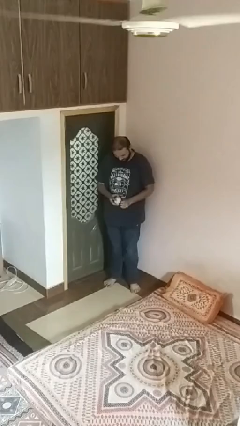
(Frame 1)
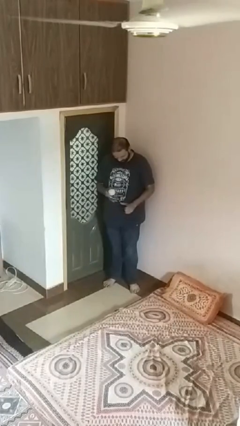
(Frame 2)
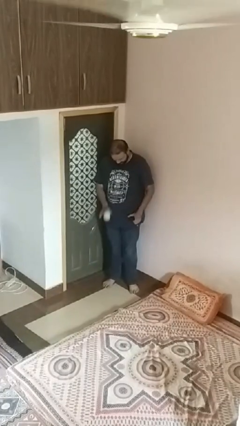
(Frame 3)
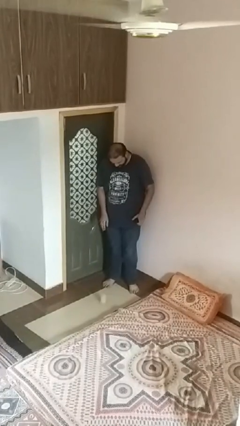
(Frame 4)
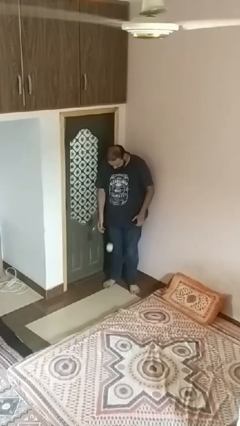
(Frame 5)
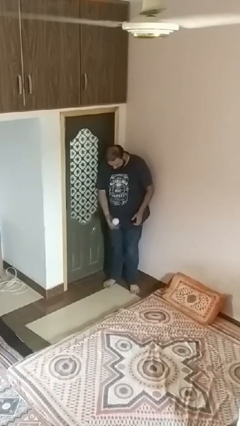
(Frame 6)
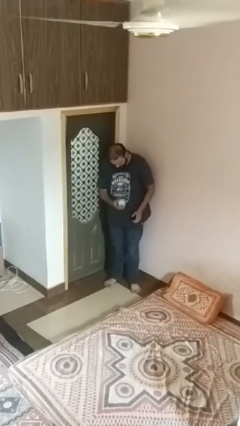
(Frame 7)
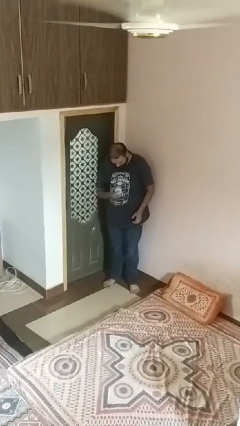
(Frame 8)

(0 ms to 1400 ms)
person bounces ball on floor

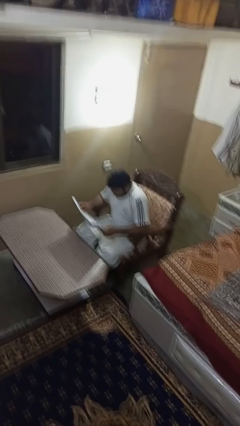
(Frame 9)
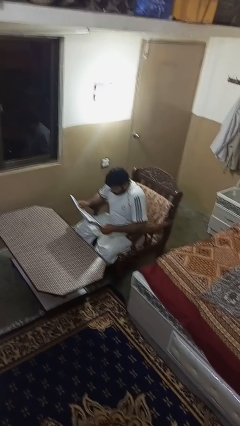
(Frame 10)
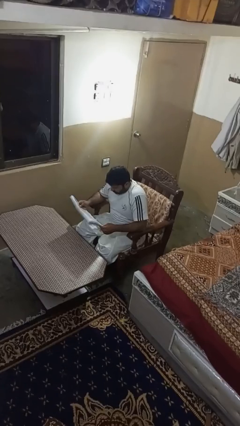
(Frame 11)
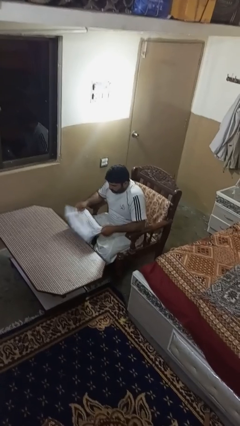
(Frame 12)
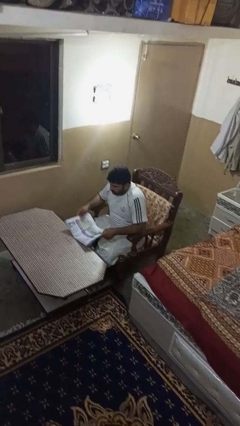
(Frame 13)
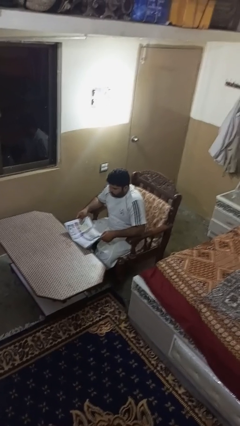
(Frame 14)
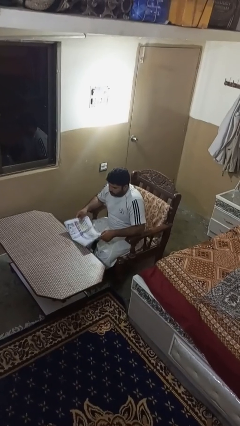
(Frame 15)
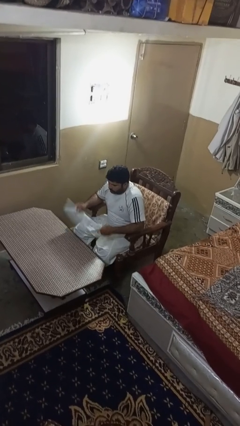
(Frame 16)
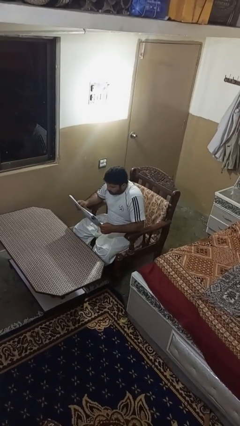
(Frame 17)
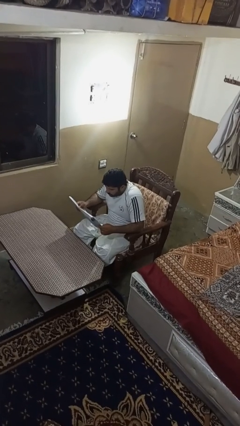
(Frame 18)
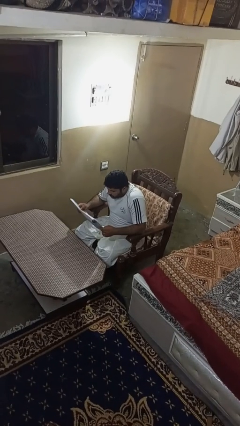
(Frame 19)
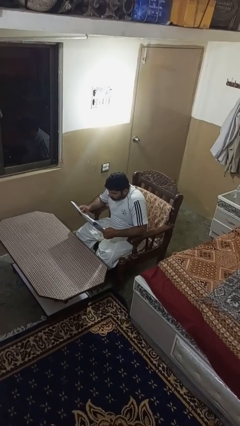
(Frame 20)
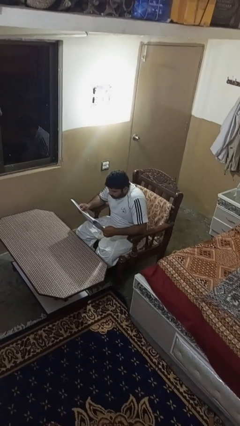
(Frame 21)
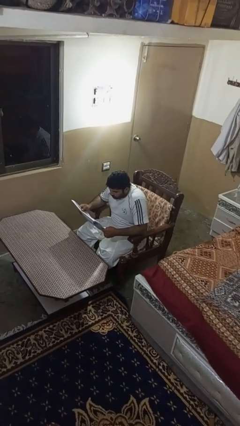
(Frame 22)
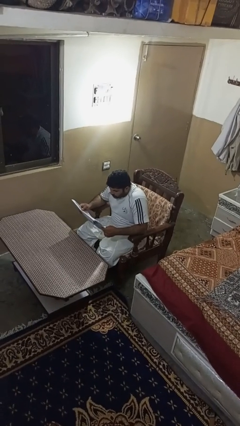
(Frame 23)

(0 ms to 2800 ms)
person reads newspaper

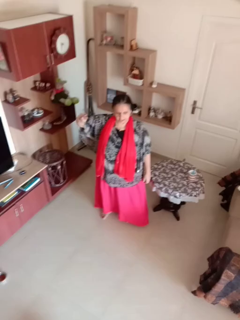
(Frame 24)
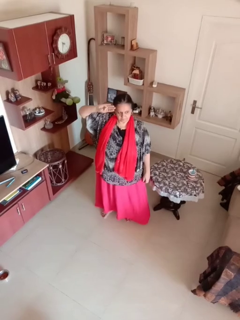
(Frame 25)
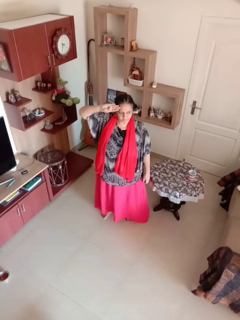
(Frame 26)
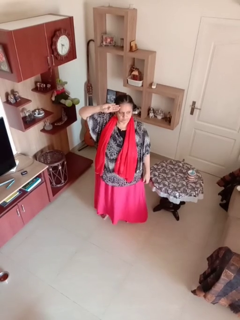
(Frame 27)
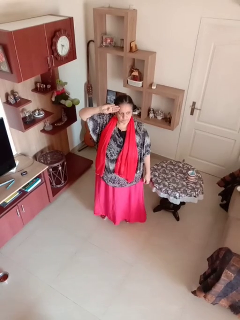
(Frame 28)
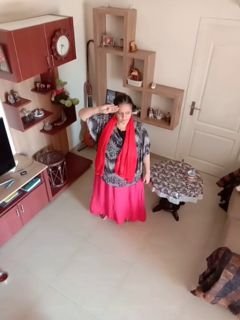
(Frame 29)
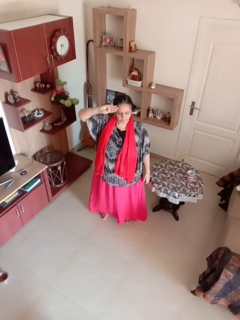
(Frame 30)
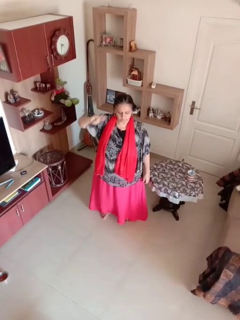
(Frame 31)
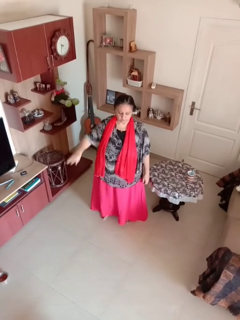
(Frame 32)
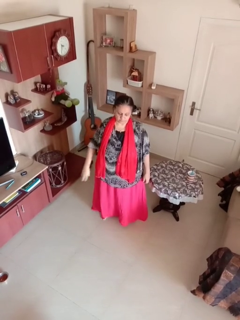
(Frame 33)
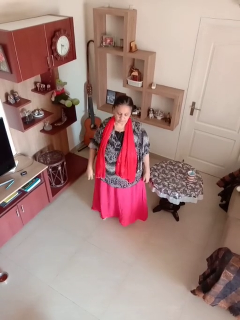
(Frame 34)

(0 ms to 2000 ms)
person salutes

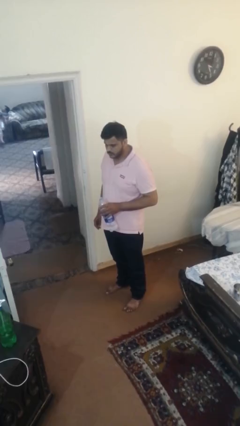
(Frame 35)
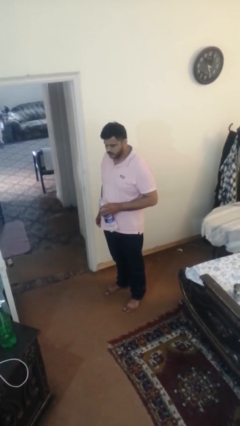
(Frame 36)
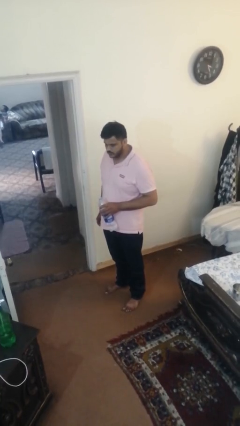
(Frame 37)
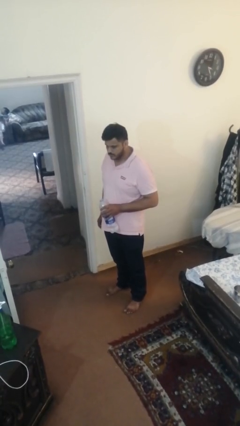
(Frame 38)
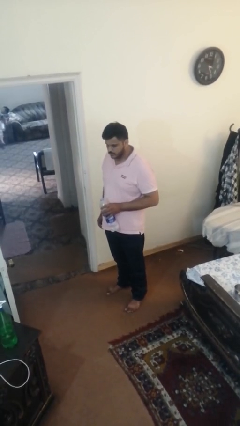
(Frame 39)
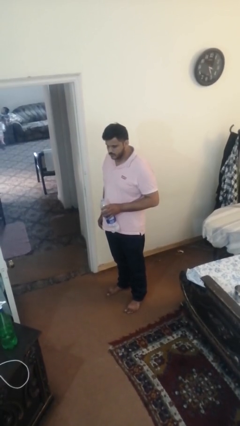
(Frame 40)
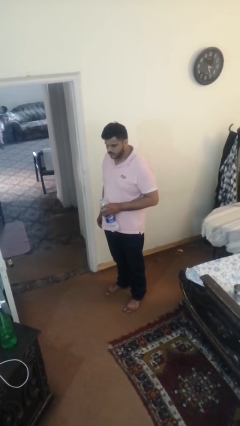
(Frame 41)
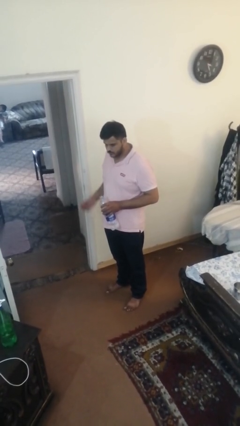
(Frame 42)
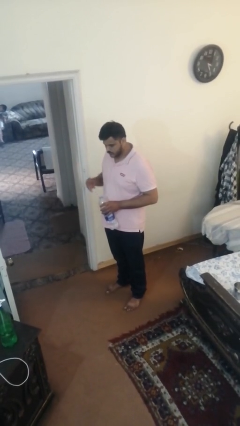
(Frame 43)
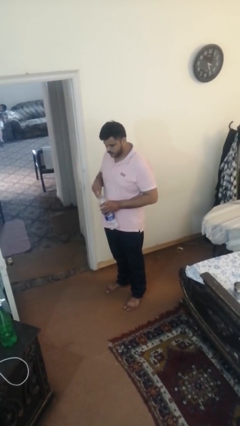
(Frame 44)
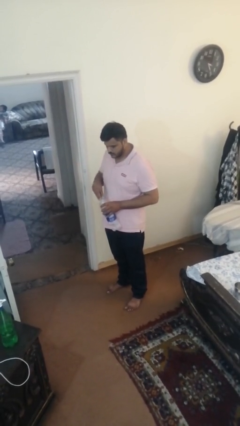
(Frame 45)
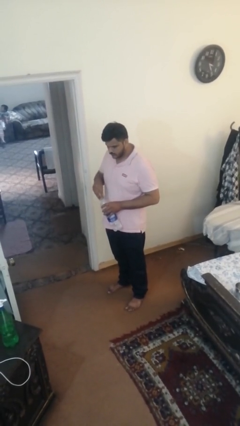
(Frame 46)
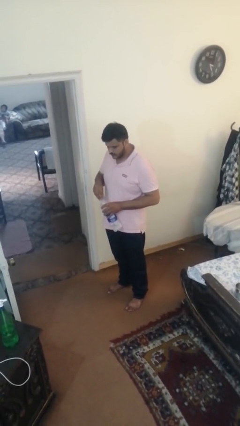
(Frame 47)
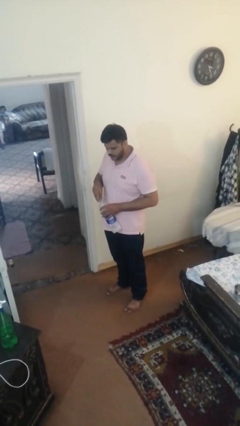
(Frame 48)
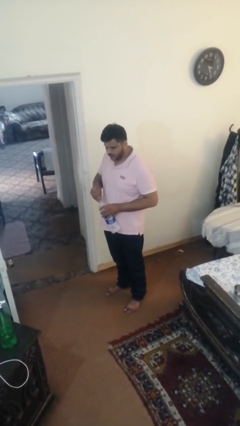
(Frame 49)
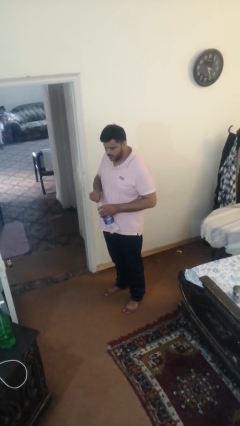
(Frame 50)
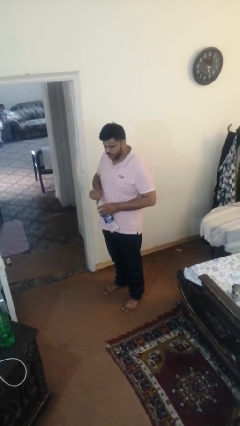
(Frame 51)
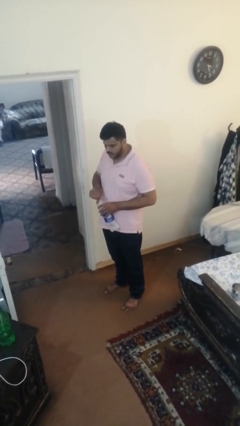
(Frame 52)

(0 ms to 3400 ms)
person screws lid to bottle

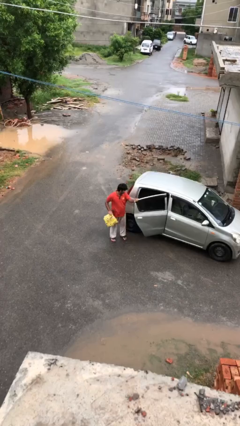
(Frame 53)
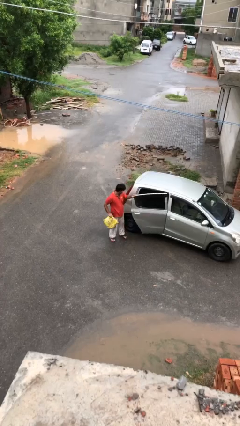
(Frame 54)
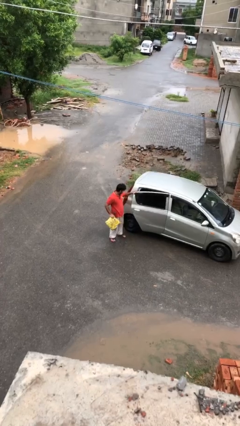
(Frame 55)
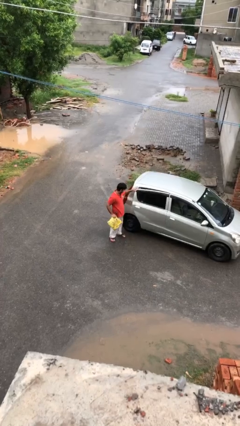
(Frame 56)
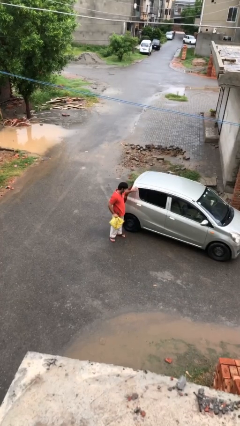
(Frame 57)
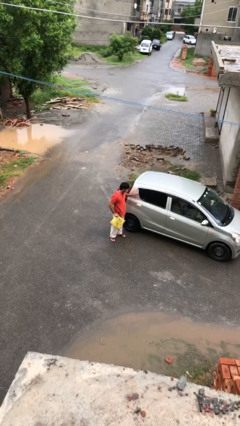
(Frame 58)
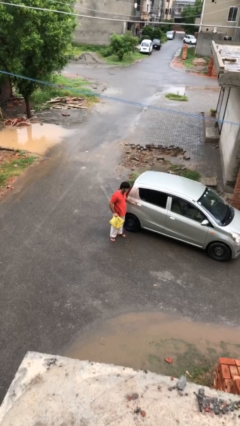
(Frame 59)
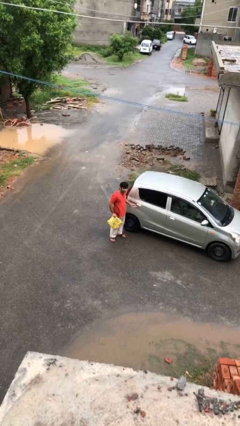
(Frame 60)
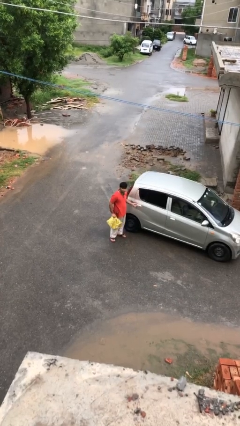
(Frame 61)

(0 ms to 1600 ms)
person closes car door

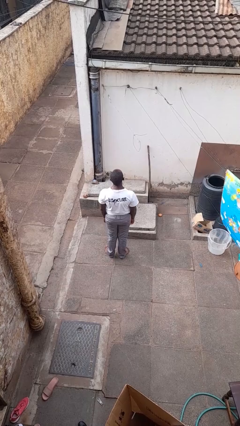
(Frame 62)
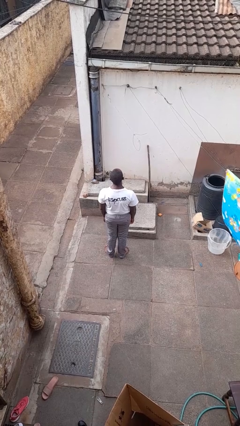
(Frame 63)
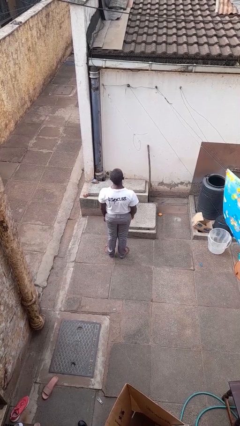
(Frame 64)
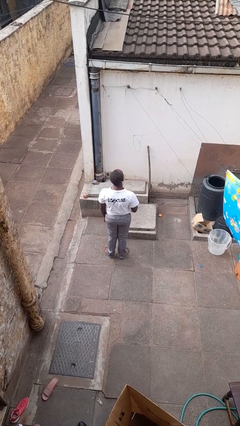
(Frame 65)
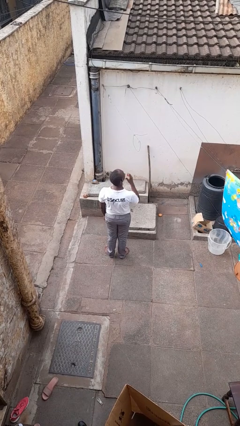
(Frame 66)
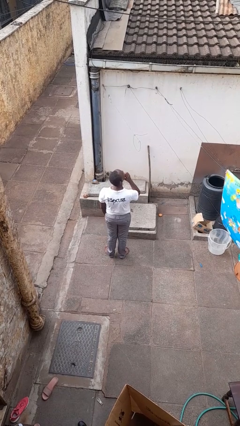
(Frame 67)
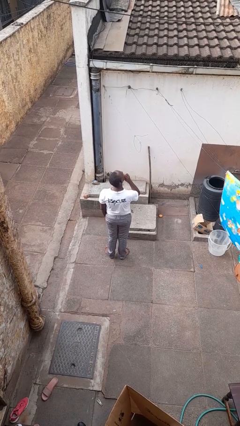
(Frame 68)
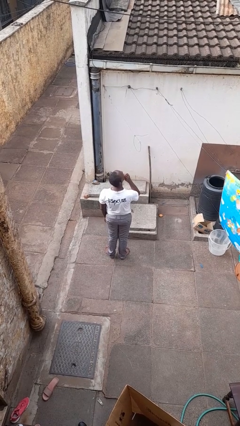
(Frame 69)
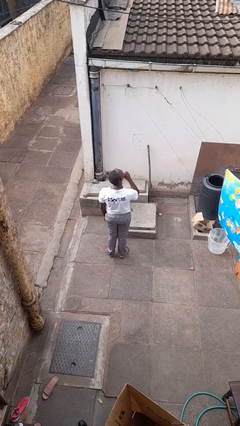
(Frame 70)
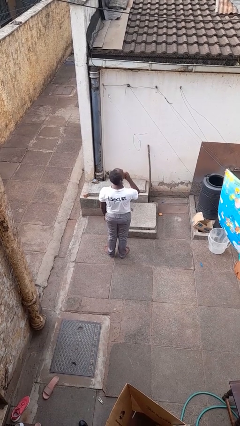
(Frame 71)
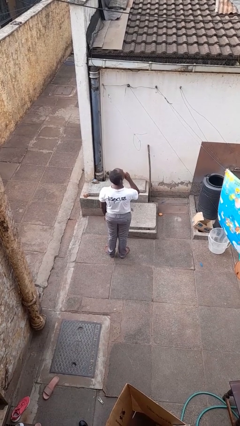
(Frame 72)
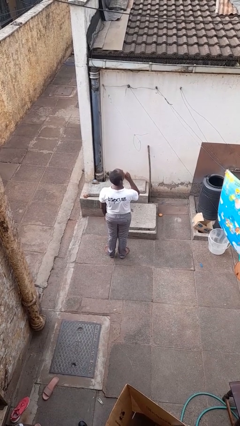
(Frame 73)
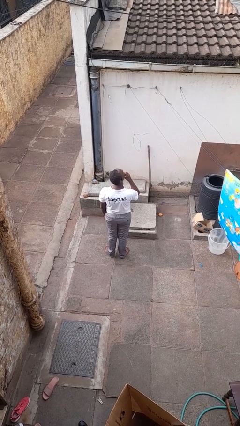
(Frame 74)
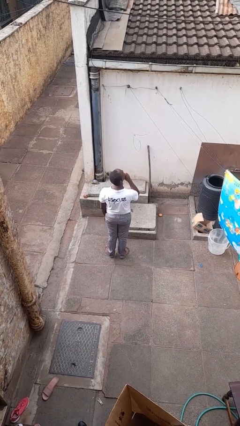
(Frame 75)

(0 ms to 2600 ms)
person strokes chin

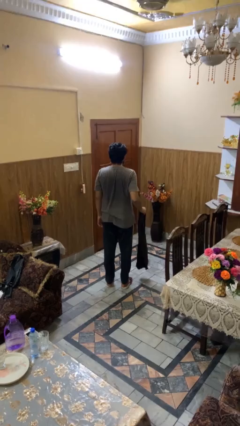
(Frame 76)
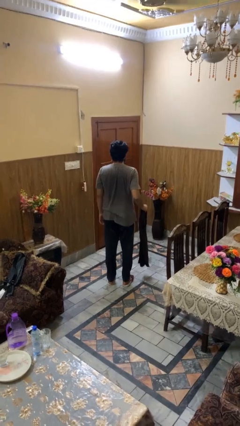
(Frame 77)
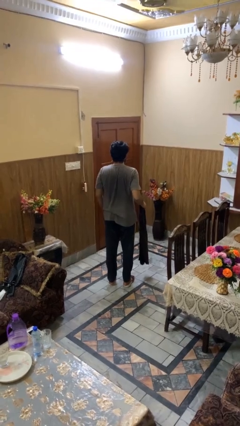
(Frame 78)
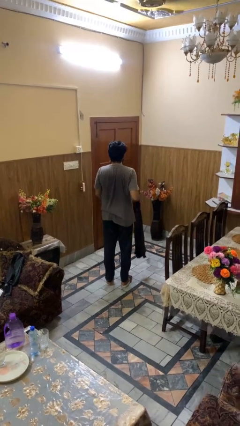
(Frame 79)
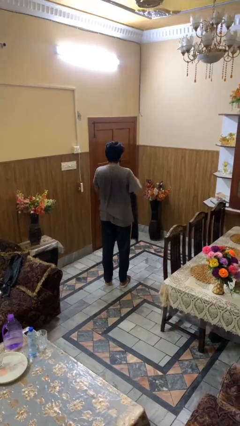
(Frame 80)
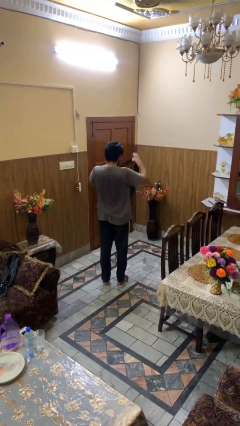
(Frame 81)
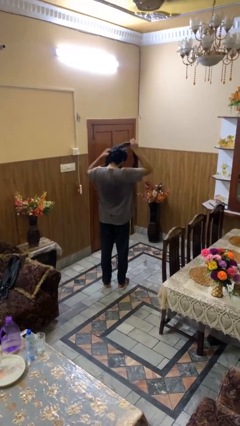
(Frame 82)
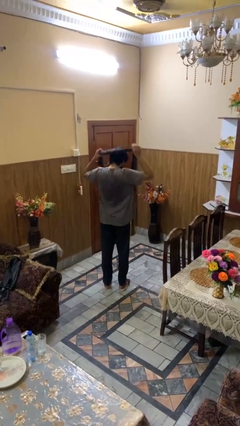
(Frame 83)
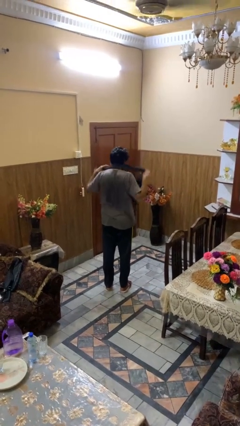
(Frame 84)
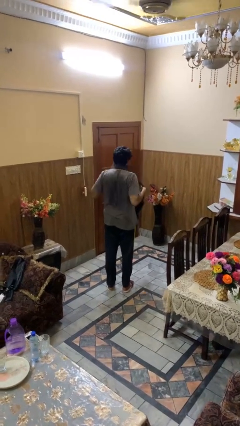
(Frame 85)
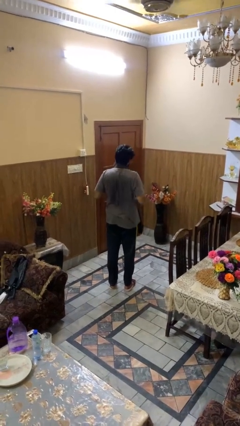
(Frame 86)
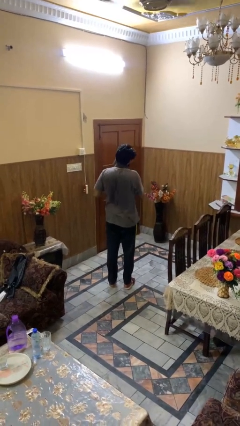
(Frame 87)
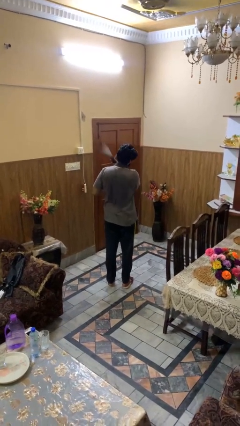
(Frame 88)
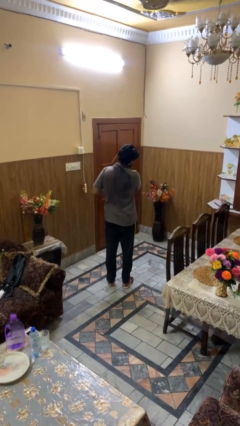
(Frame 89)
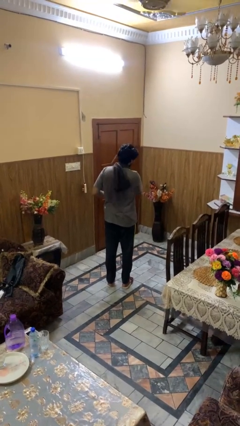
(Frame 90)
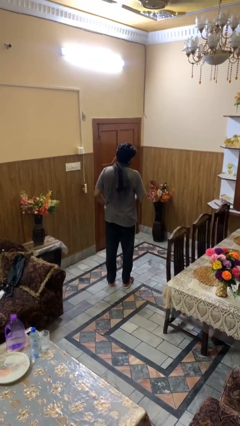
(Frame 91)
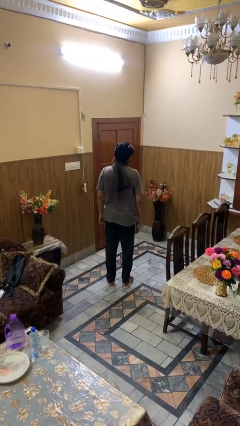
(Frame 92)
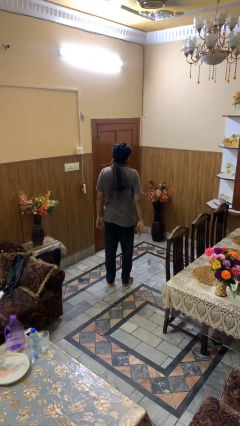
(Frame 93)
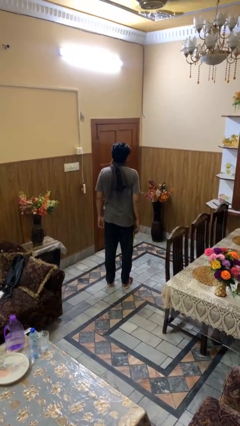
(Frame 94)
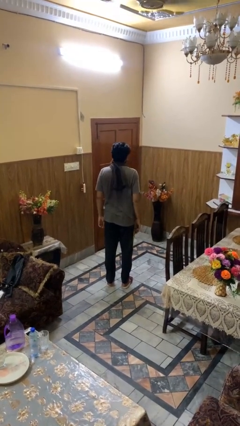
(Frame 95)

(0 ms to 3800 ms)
person puts on scarf
